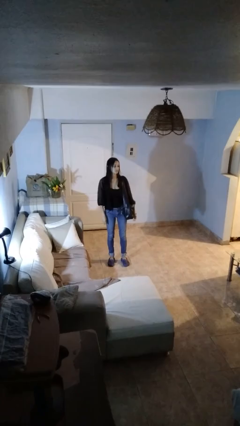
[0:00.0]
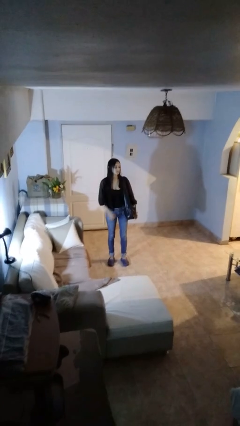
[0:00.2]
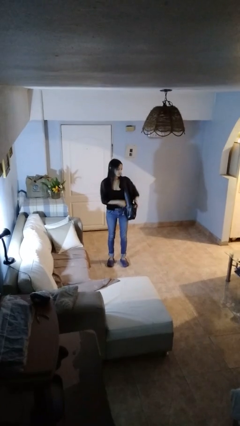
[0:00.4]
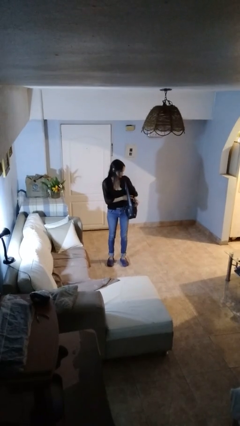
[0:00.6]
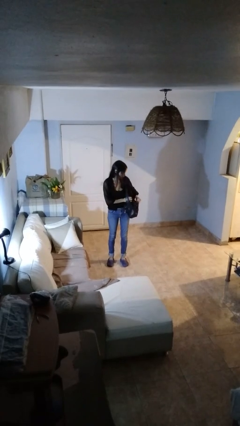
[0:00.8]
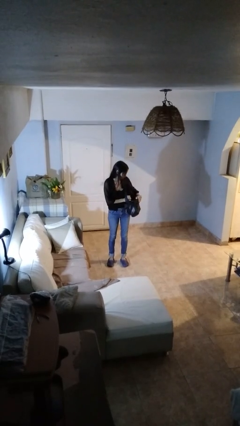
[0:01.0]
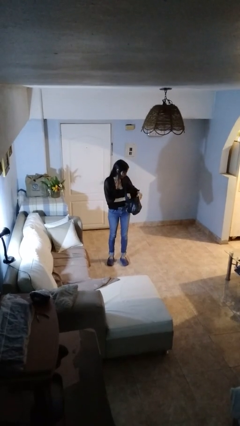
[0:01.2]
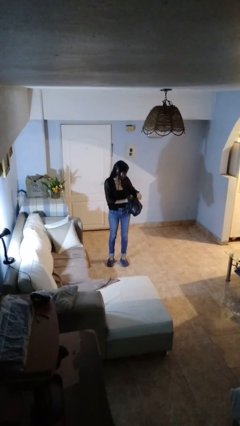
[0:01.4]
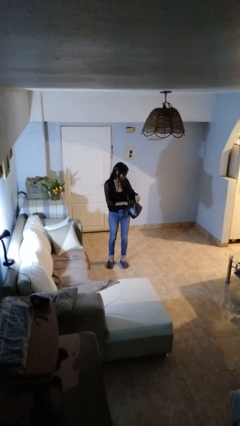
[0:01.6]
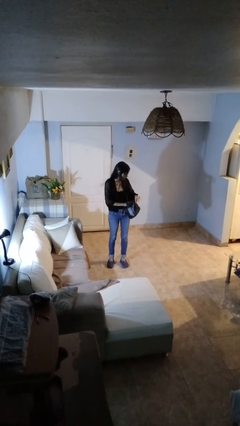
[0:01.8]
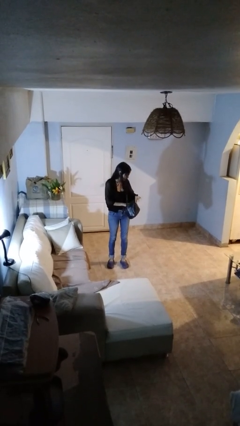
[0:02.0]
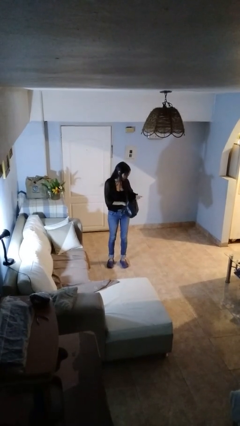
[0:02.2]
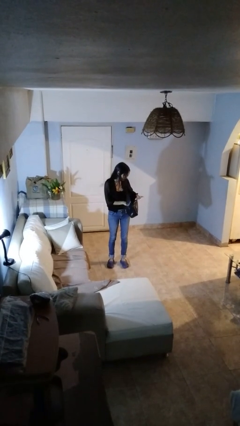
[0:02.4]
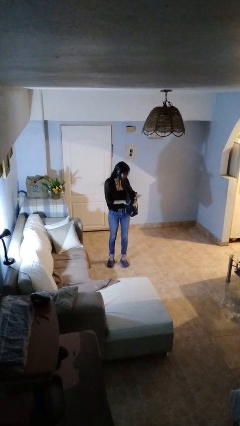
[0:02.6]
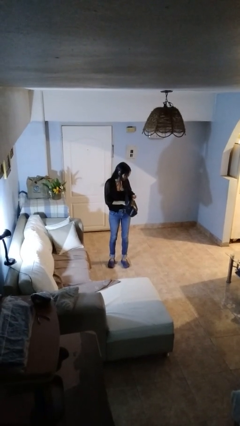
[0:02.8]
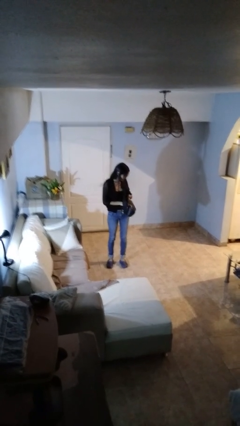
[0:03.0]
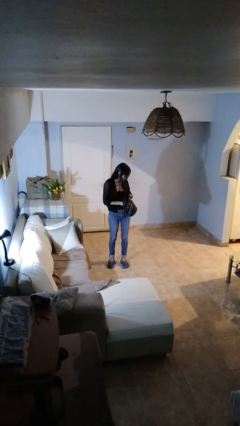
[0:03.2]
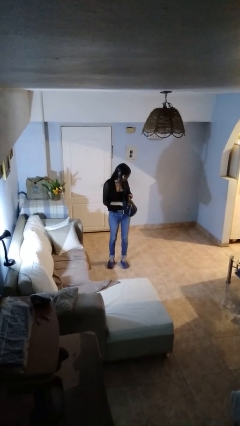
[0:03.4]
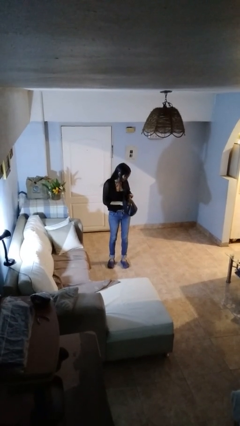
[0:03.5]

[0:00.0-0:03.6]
person searches in purse

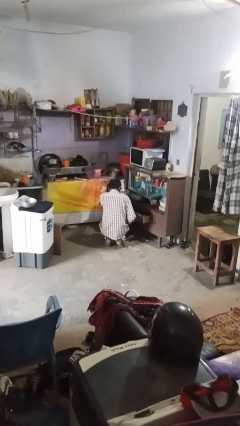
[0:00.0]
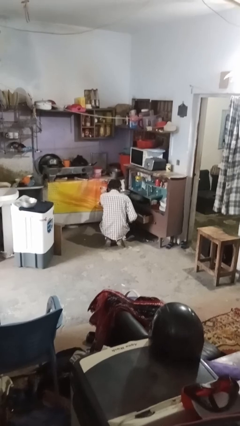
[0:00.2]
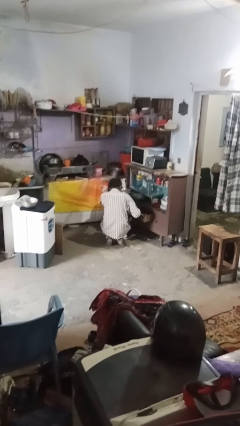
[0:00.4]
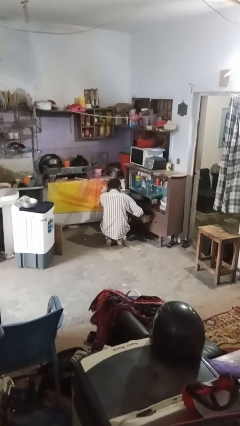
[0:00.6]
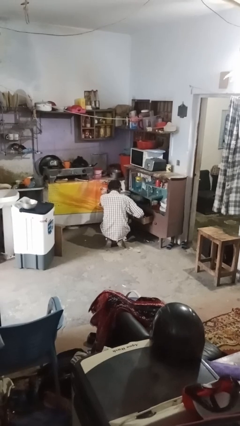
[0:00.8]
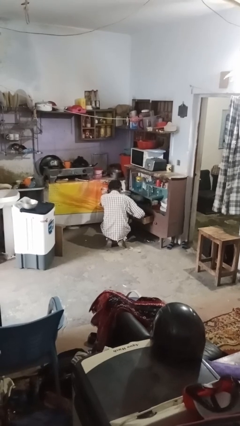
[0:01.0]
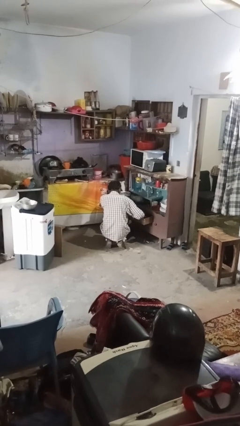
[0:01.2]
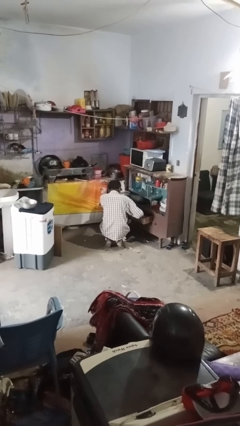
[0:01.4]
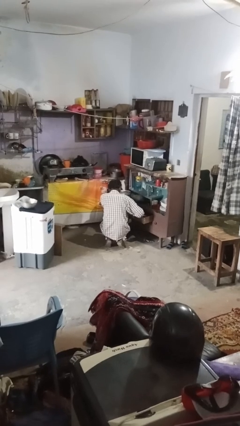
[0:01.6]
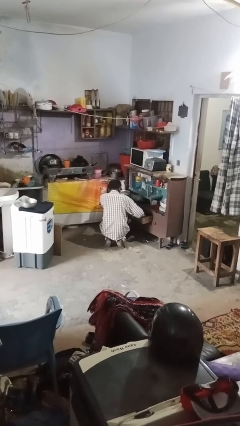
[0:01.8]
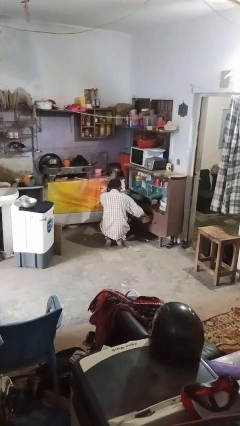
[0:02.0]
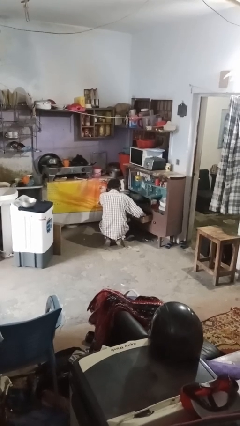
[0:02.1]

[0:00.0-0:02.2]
person searches in kitchen drawer

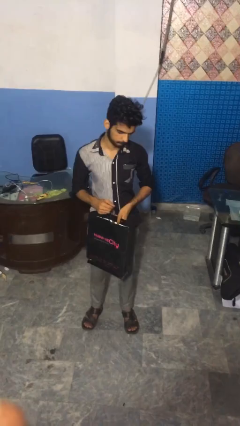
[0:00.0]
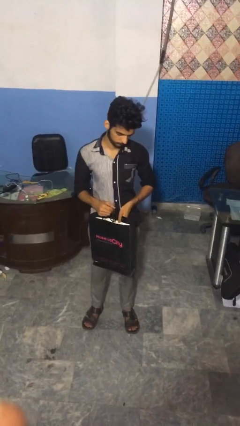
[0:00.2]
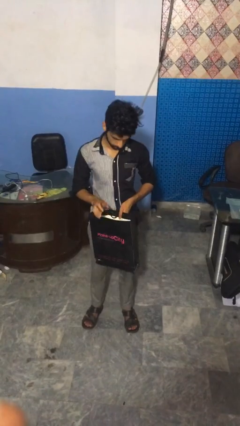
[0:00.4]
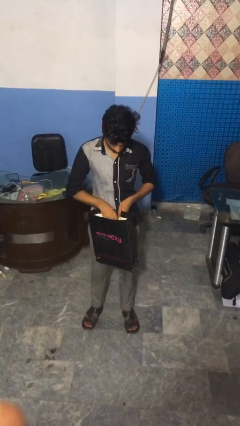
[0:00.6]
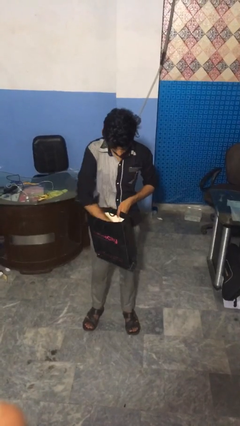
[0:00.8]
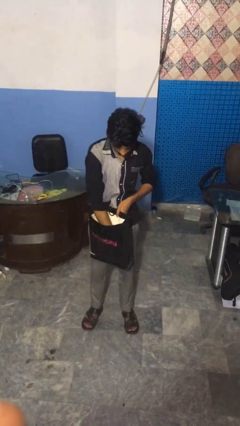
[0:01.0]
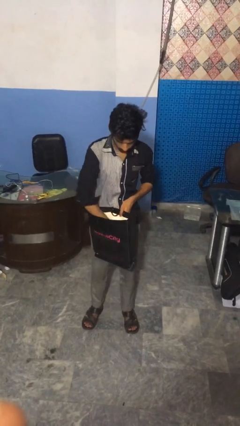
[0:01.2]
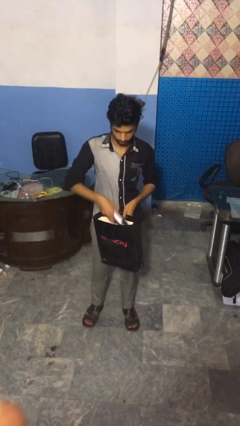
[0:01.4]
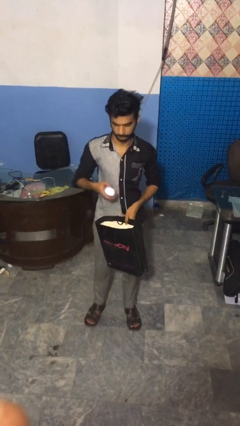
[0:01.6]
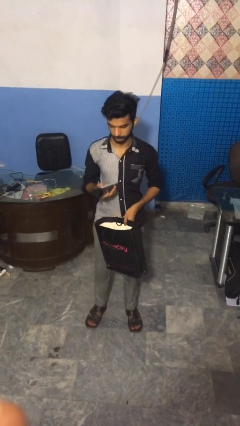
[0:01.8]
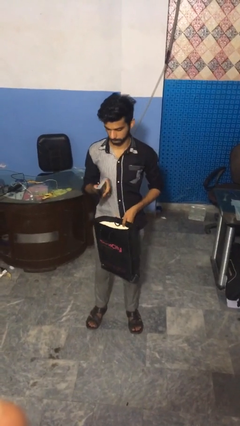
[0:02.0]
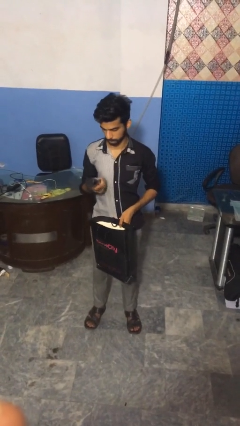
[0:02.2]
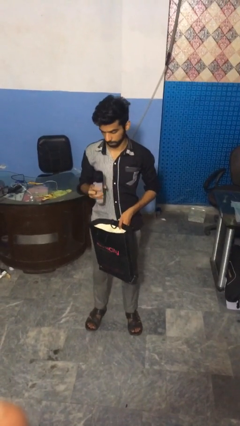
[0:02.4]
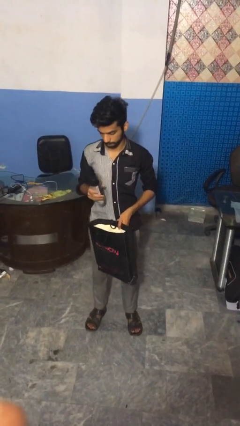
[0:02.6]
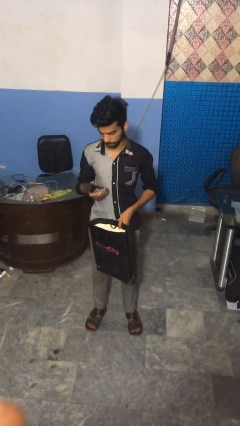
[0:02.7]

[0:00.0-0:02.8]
person takes object from bag

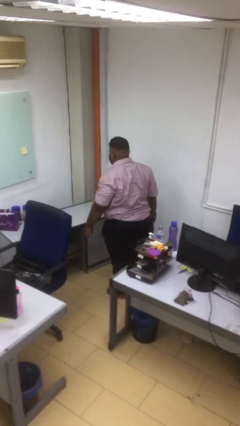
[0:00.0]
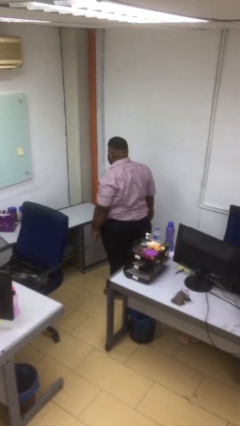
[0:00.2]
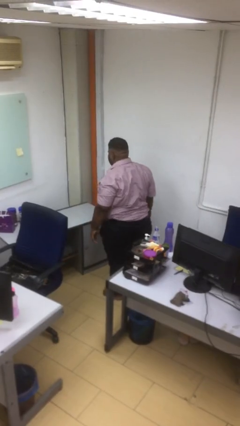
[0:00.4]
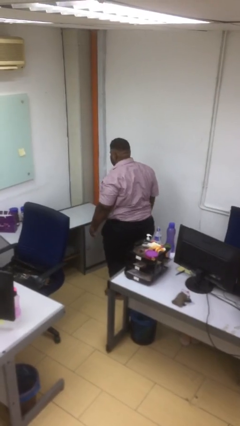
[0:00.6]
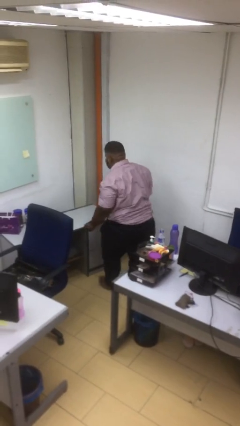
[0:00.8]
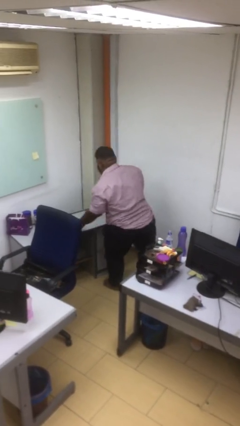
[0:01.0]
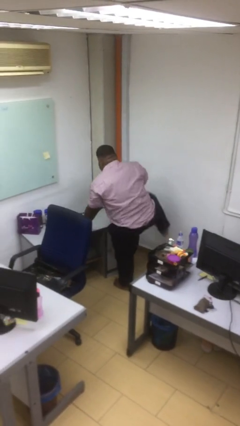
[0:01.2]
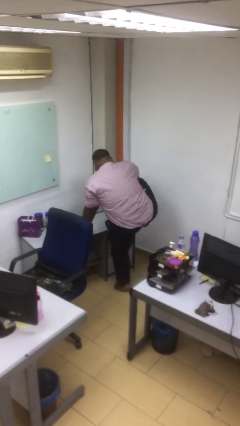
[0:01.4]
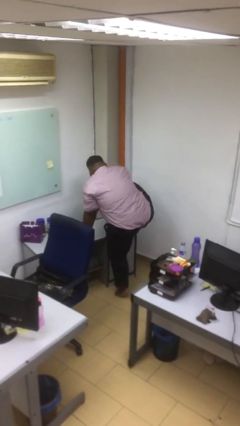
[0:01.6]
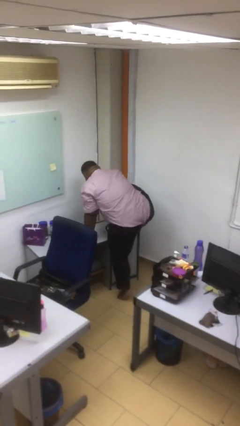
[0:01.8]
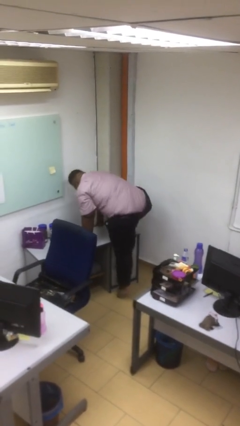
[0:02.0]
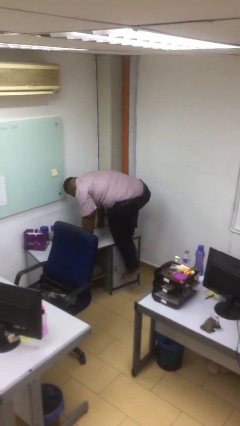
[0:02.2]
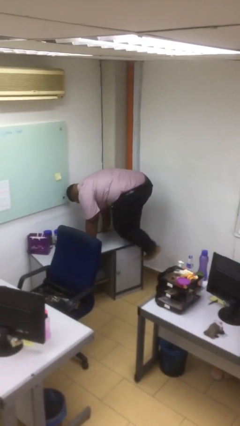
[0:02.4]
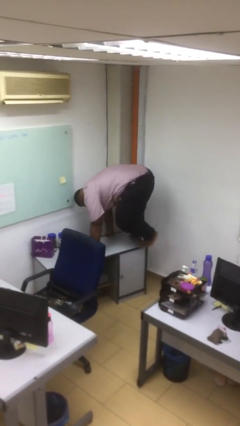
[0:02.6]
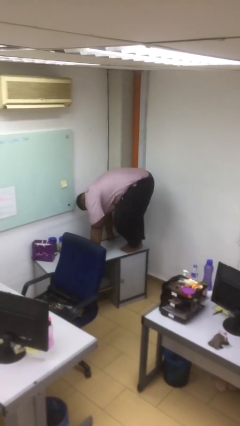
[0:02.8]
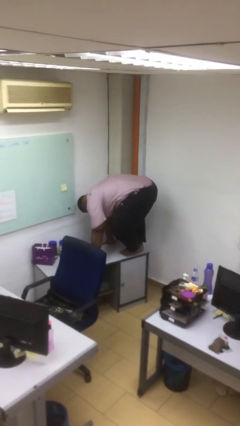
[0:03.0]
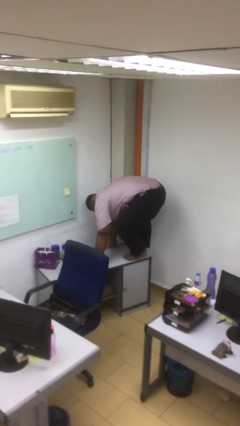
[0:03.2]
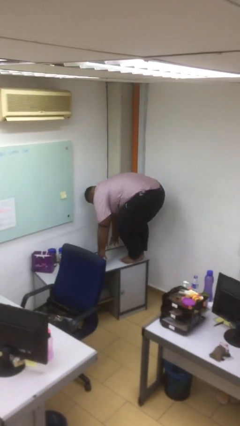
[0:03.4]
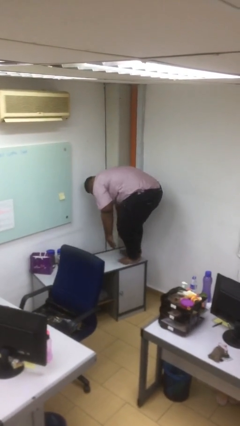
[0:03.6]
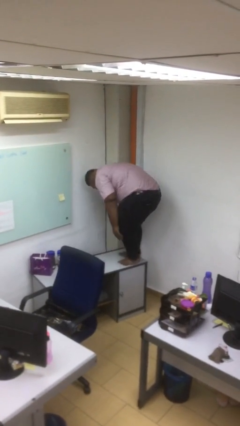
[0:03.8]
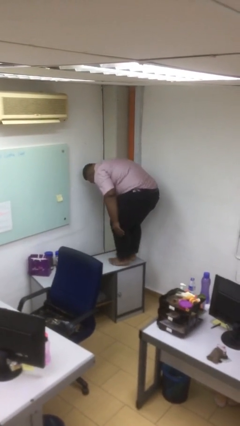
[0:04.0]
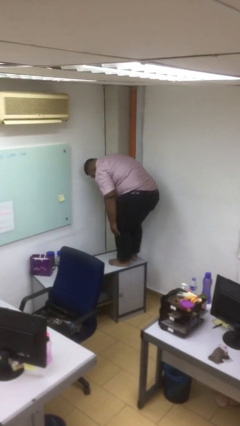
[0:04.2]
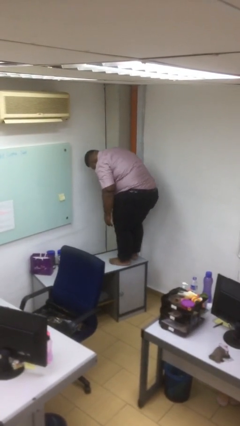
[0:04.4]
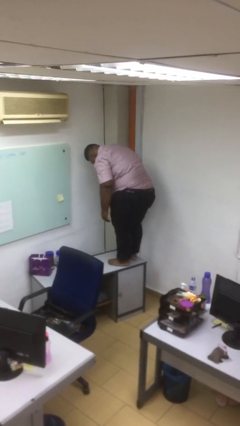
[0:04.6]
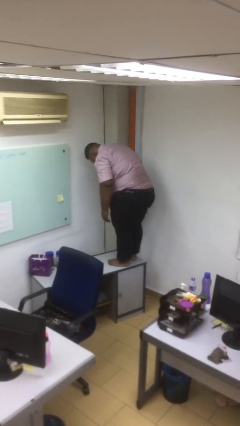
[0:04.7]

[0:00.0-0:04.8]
person climbs on table

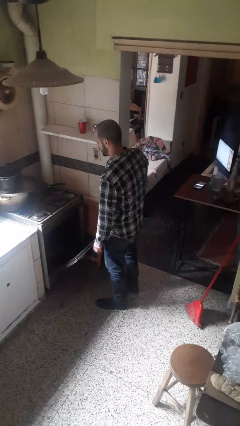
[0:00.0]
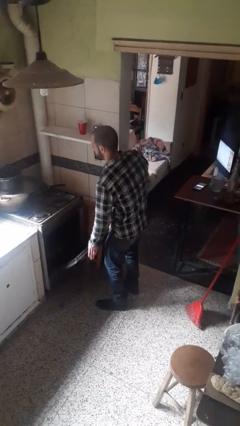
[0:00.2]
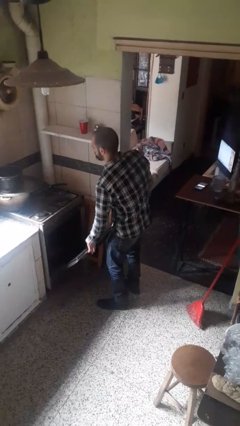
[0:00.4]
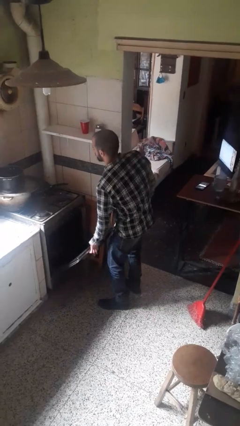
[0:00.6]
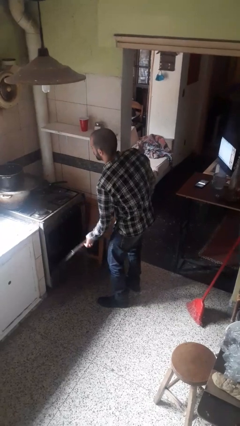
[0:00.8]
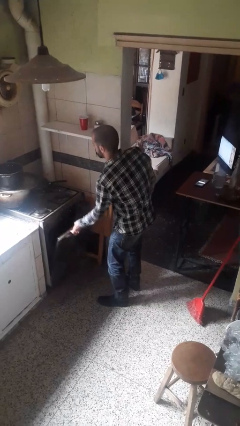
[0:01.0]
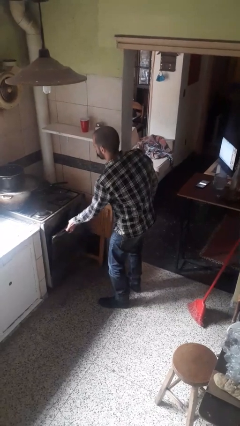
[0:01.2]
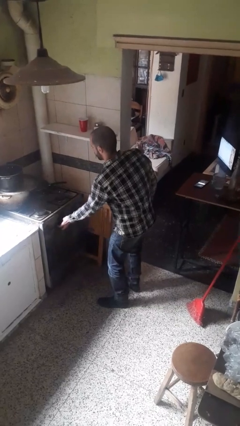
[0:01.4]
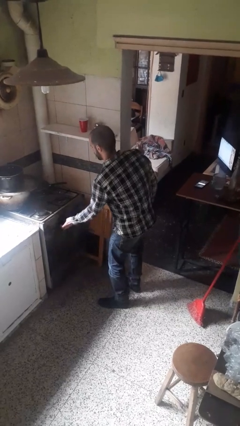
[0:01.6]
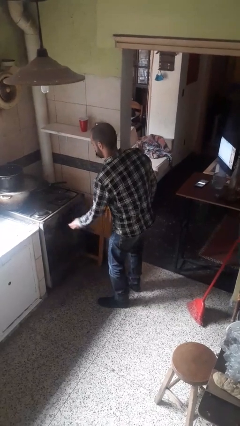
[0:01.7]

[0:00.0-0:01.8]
person closes oven door

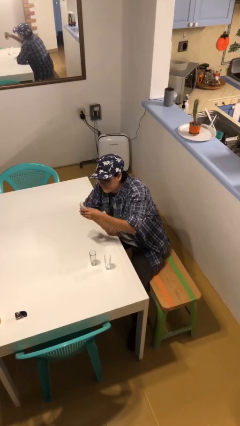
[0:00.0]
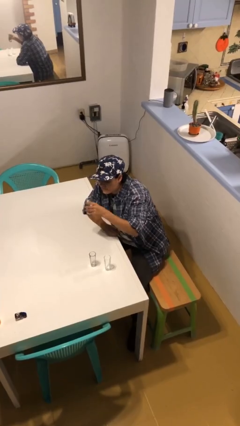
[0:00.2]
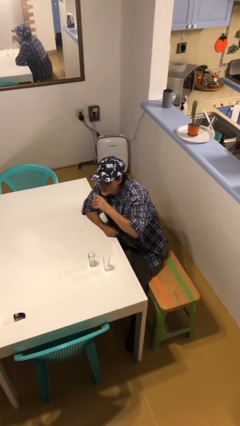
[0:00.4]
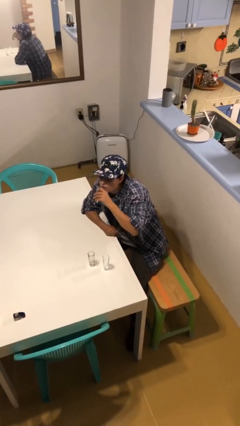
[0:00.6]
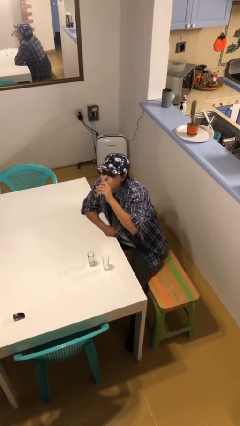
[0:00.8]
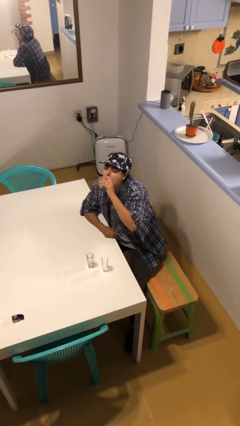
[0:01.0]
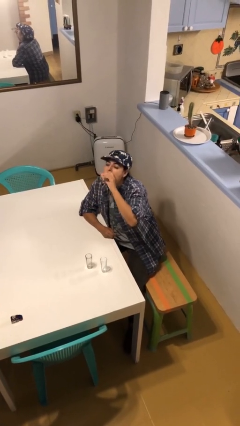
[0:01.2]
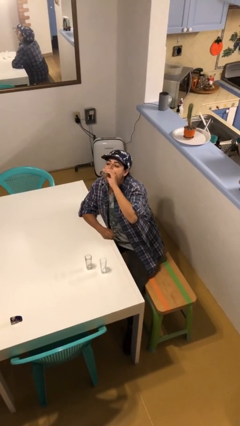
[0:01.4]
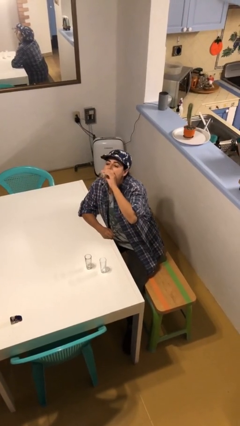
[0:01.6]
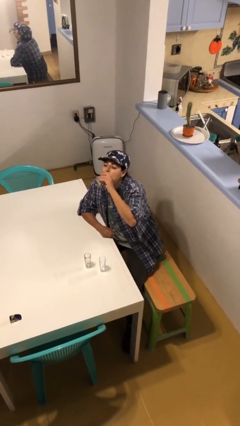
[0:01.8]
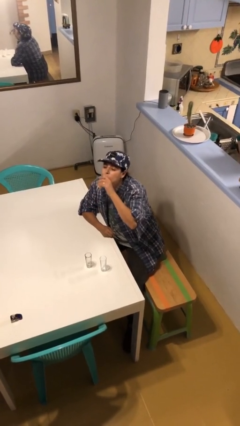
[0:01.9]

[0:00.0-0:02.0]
person drinks from shotglass

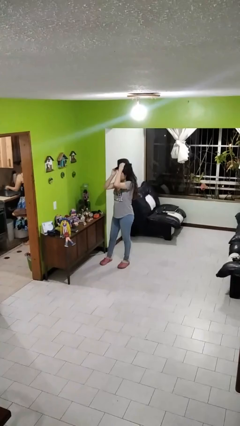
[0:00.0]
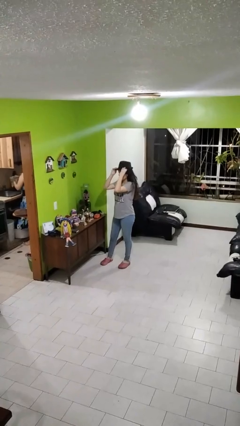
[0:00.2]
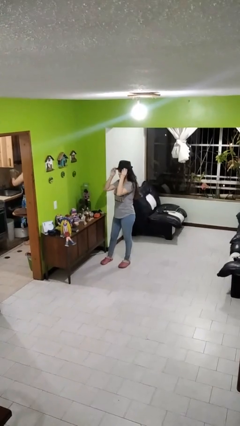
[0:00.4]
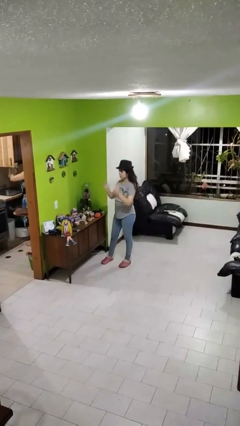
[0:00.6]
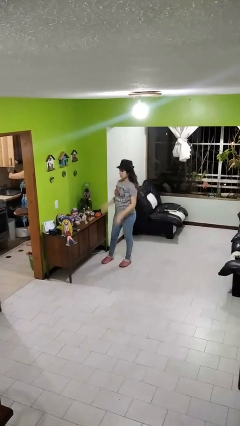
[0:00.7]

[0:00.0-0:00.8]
person puts on hat
